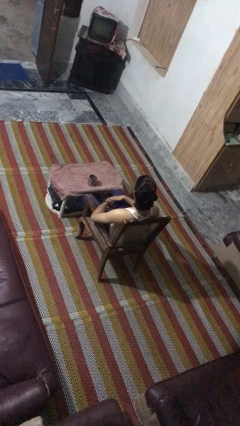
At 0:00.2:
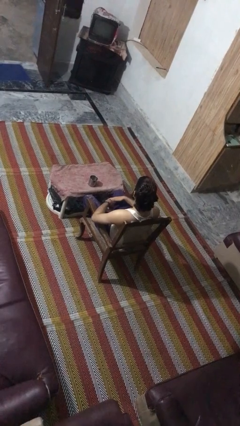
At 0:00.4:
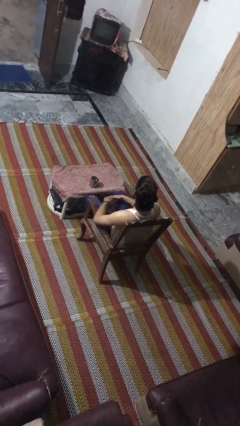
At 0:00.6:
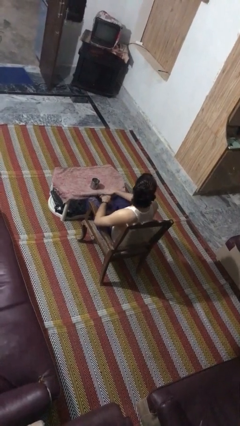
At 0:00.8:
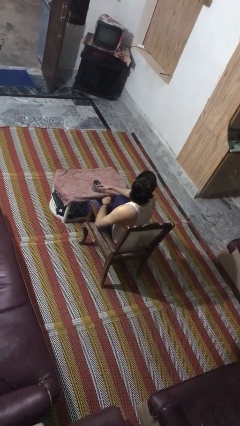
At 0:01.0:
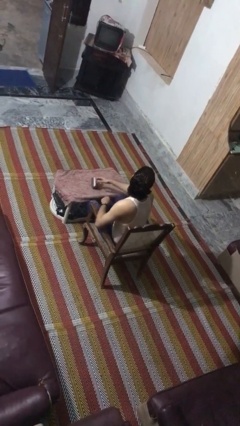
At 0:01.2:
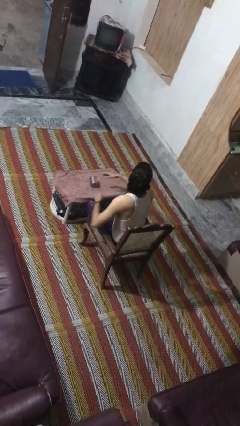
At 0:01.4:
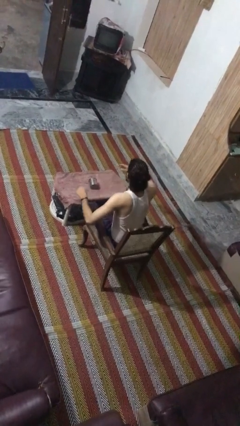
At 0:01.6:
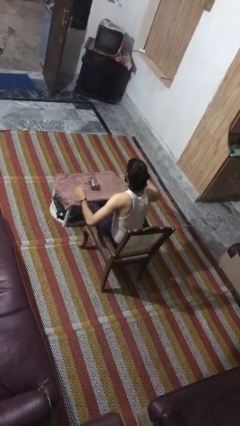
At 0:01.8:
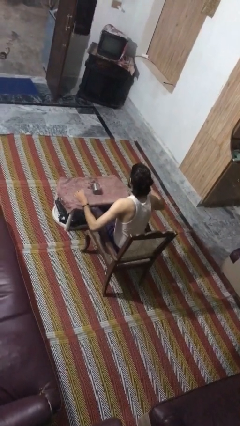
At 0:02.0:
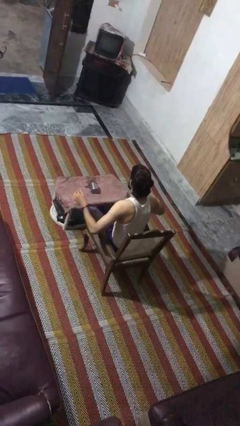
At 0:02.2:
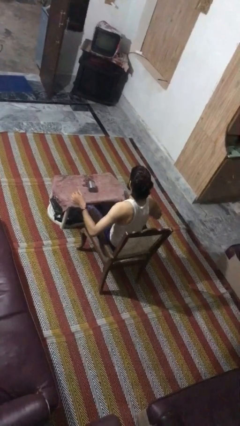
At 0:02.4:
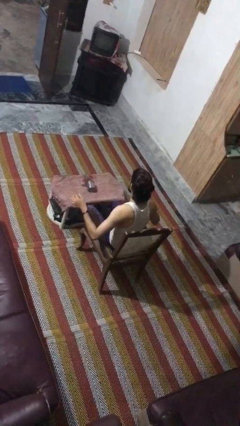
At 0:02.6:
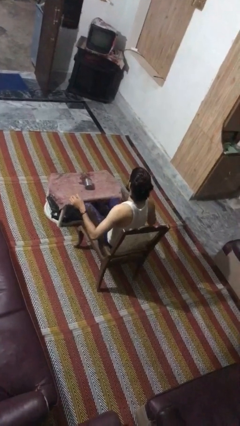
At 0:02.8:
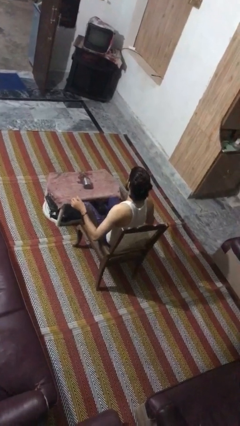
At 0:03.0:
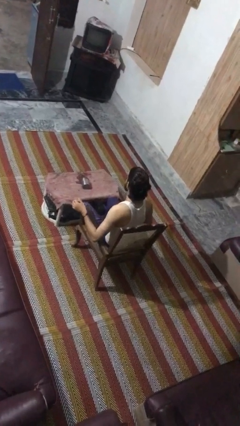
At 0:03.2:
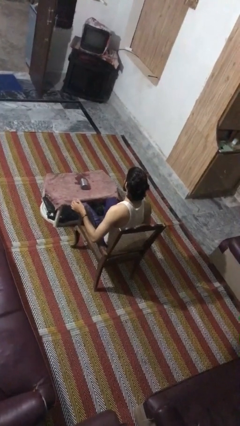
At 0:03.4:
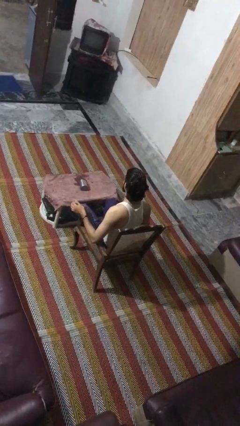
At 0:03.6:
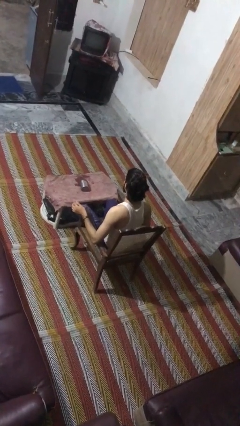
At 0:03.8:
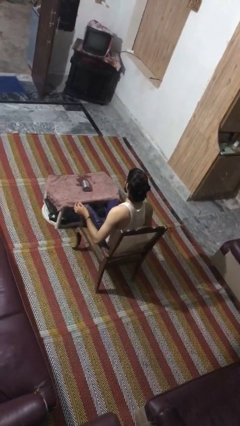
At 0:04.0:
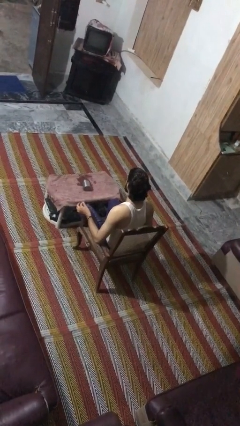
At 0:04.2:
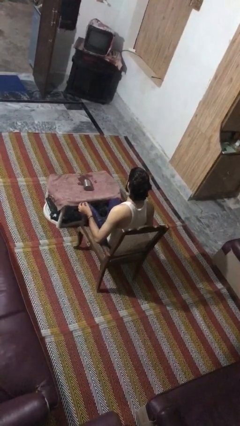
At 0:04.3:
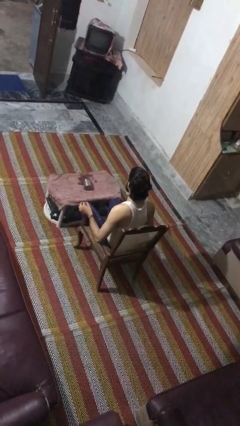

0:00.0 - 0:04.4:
person spills on table

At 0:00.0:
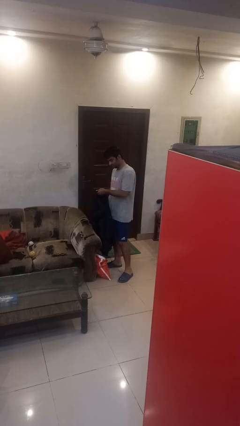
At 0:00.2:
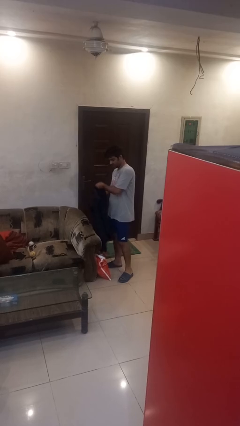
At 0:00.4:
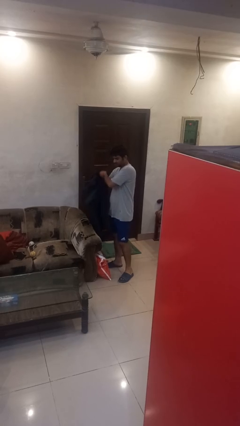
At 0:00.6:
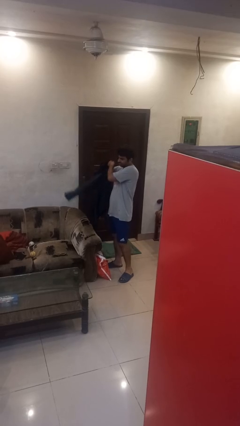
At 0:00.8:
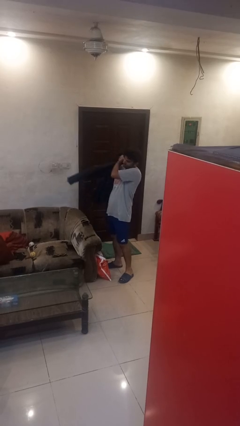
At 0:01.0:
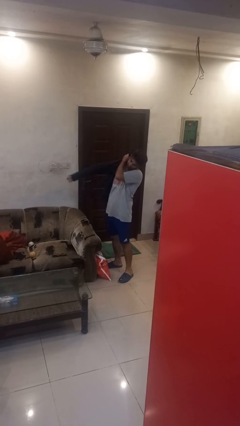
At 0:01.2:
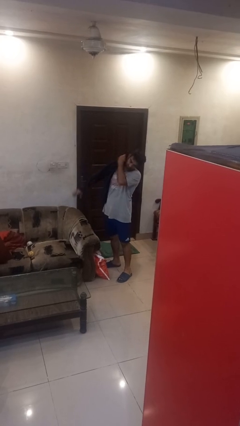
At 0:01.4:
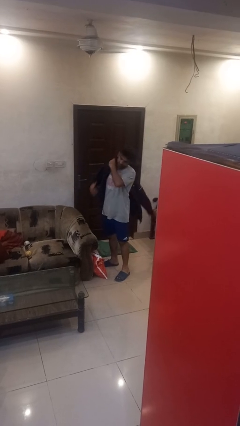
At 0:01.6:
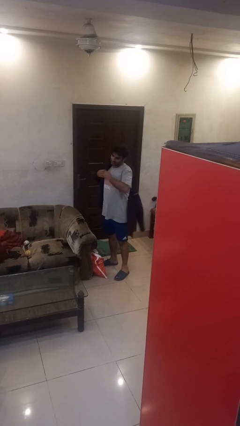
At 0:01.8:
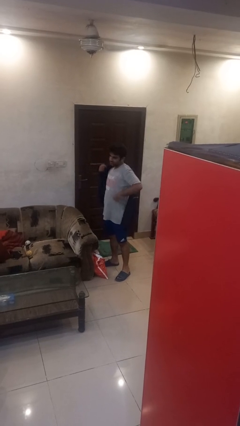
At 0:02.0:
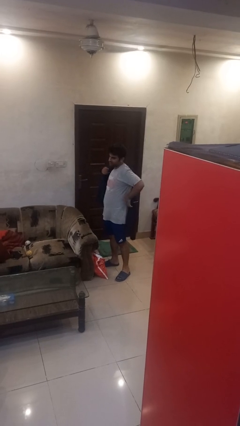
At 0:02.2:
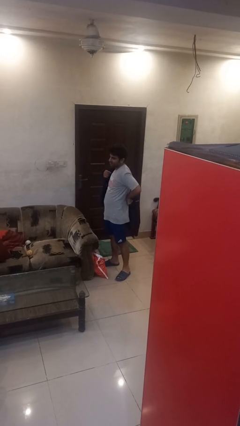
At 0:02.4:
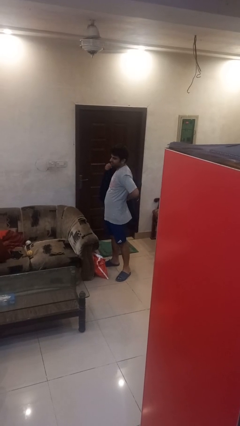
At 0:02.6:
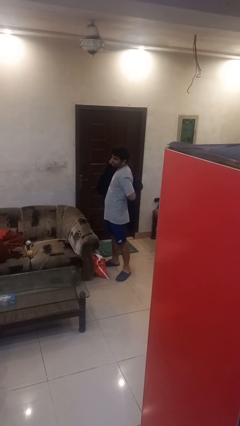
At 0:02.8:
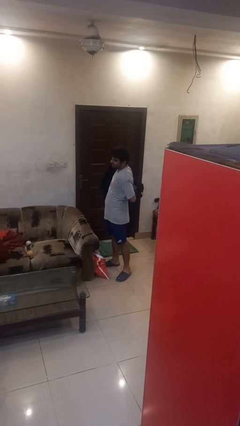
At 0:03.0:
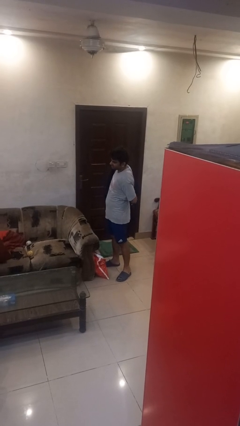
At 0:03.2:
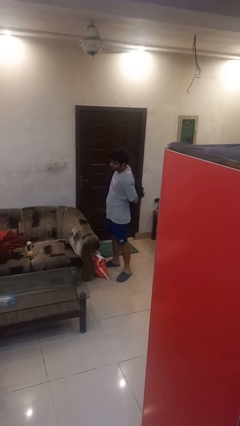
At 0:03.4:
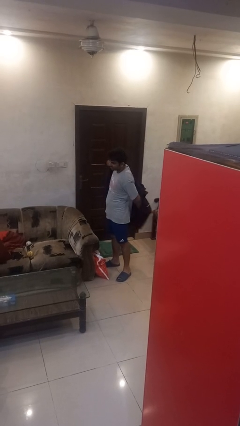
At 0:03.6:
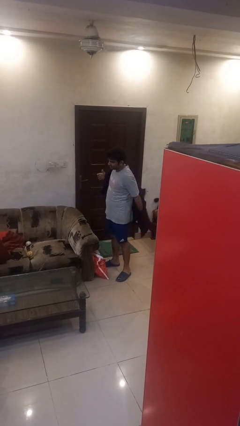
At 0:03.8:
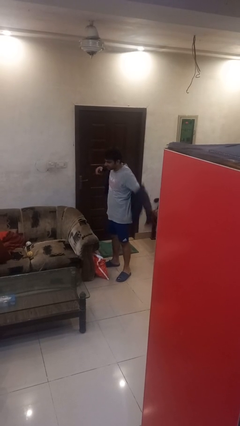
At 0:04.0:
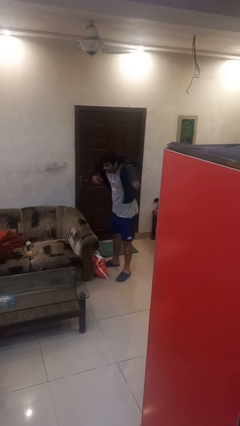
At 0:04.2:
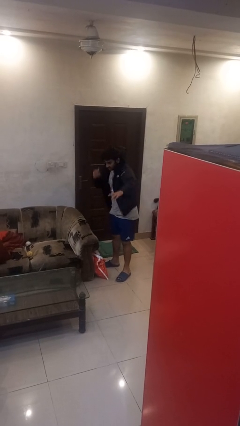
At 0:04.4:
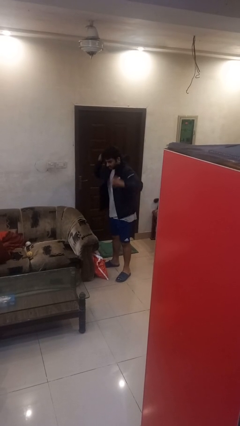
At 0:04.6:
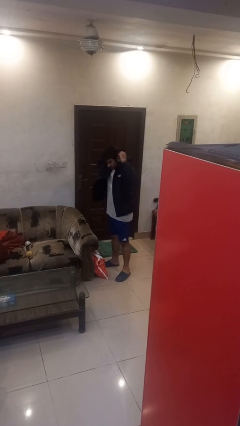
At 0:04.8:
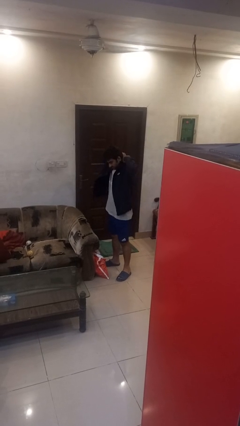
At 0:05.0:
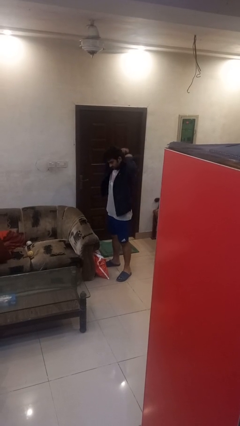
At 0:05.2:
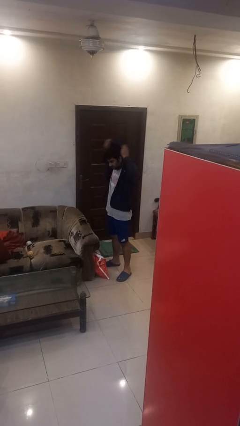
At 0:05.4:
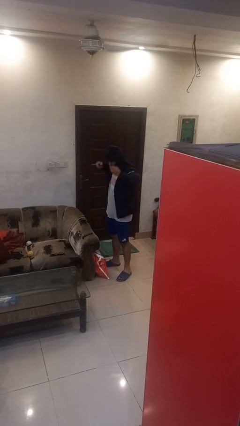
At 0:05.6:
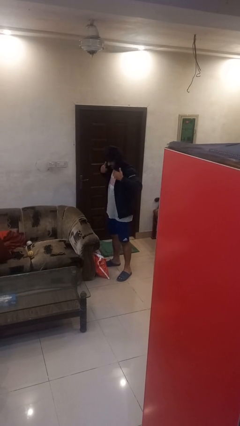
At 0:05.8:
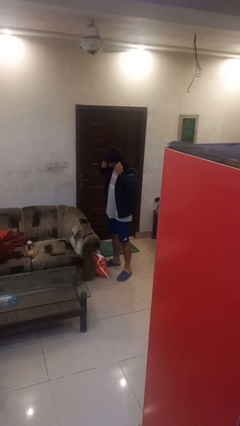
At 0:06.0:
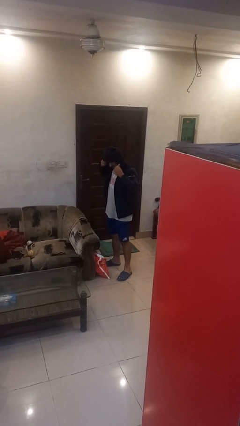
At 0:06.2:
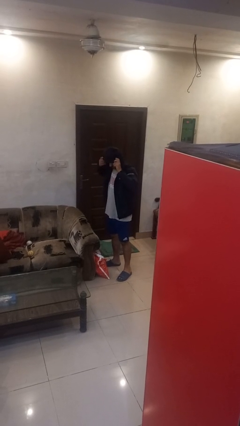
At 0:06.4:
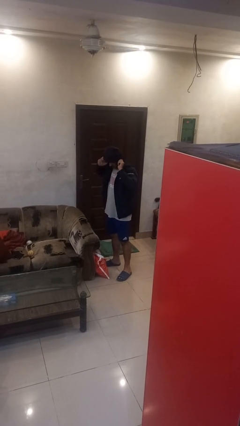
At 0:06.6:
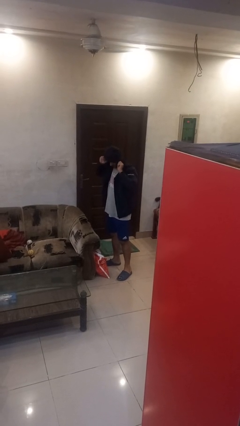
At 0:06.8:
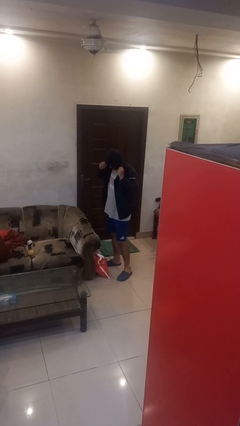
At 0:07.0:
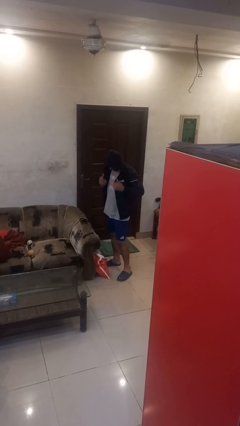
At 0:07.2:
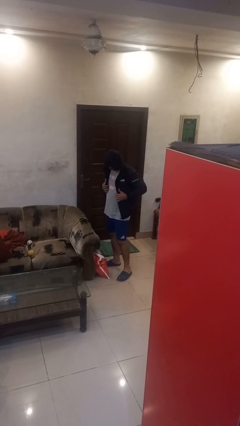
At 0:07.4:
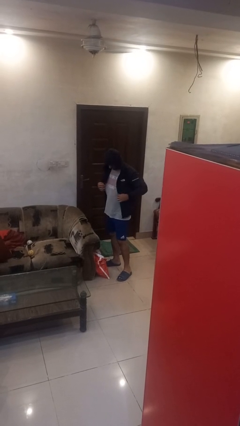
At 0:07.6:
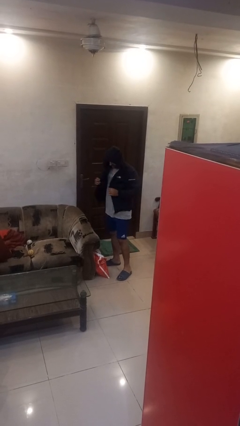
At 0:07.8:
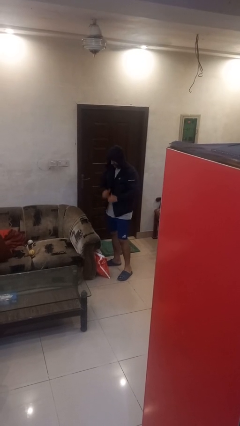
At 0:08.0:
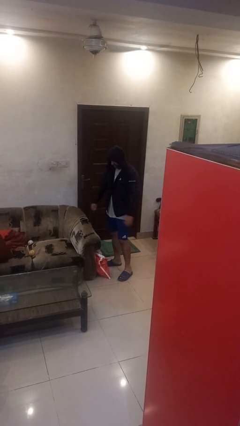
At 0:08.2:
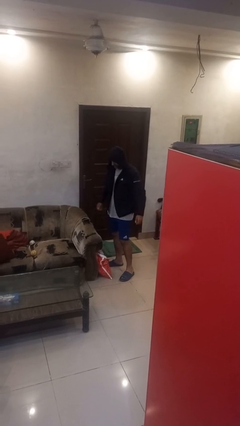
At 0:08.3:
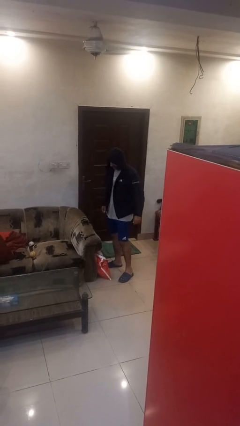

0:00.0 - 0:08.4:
person puts on hoodie

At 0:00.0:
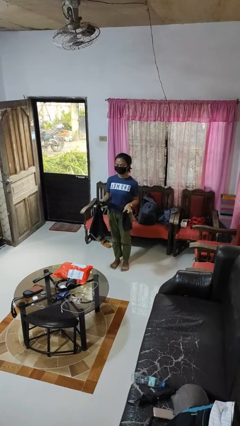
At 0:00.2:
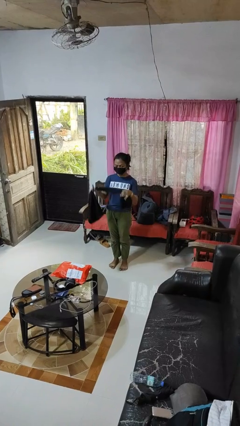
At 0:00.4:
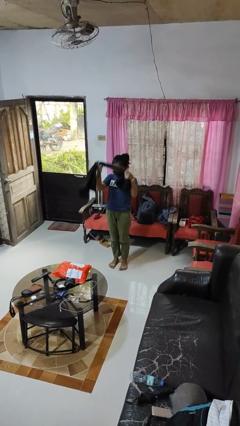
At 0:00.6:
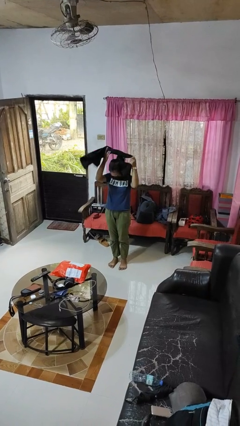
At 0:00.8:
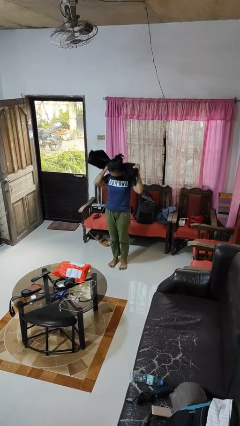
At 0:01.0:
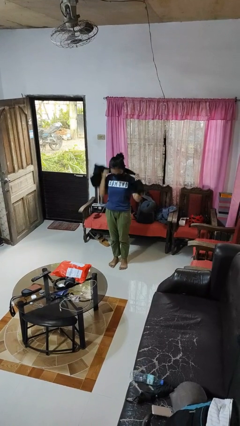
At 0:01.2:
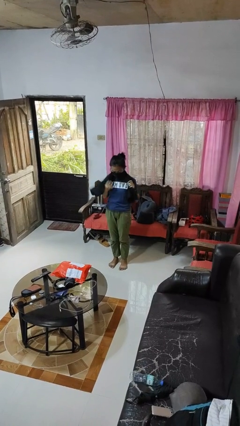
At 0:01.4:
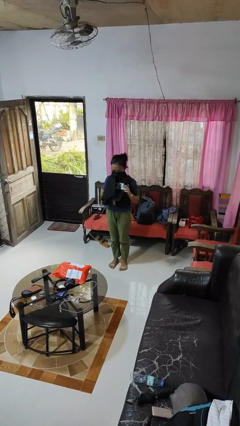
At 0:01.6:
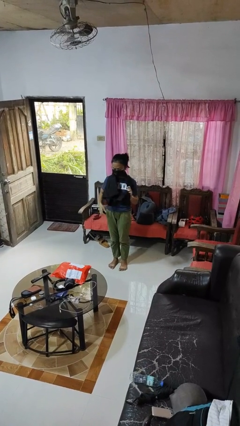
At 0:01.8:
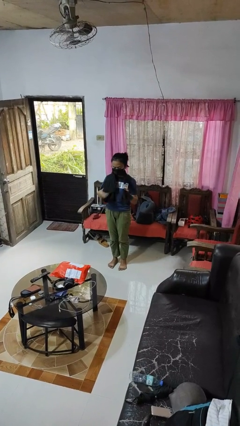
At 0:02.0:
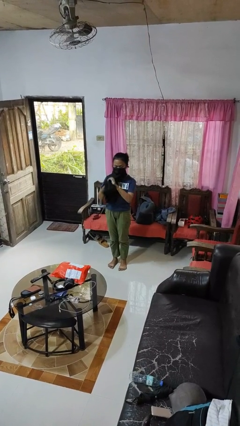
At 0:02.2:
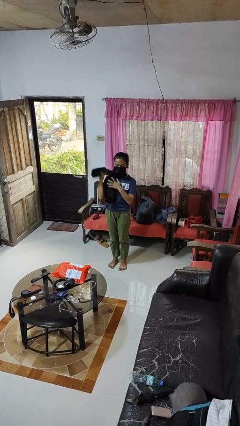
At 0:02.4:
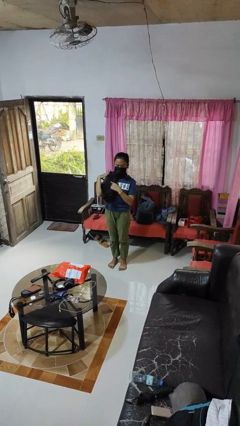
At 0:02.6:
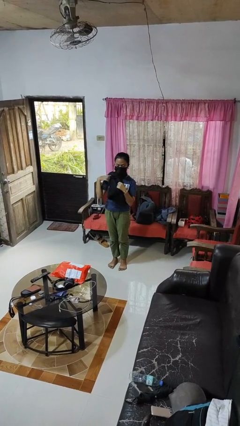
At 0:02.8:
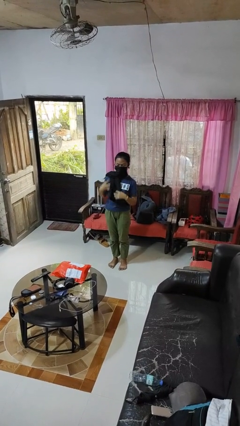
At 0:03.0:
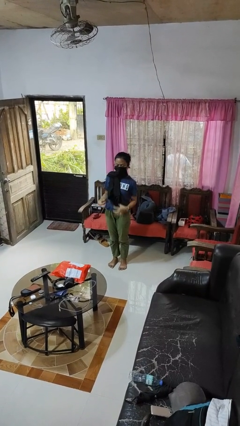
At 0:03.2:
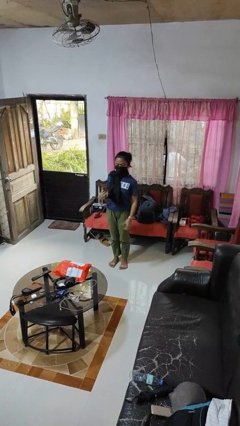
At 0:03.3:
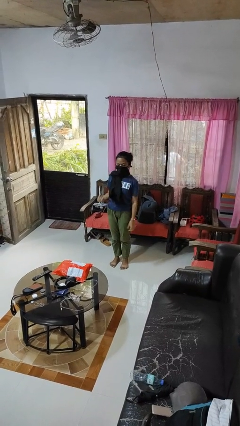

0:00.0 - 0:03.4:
person puts on scarf

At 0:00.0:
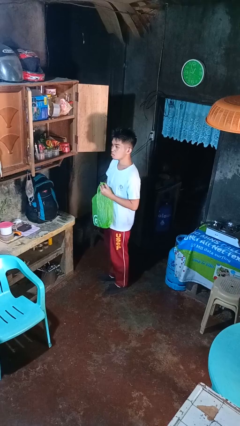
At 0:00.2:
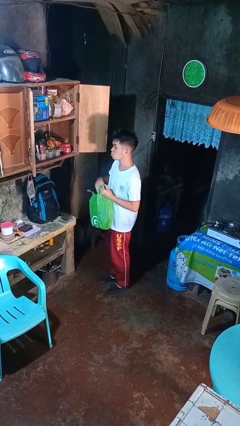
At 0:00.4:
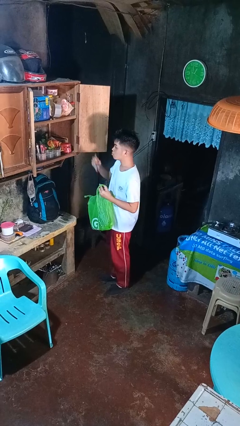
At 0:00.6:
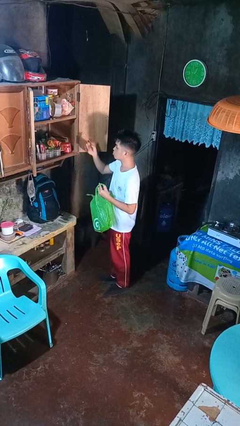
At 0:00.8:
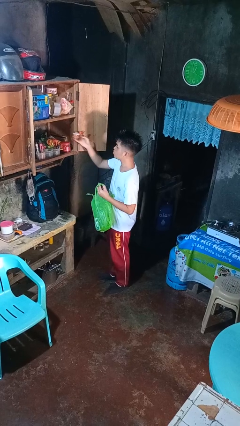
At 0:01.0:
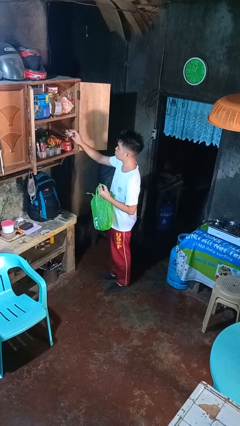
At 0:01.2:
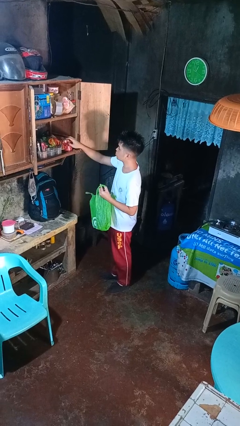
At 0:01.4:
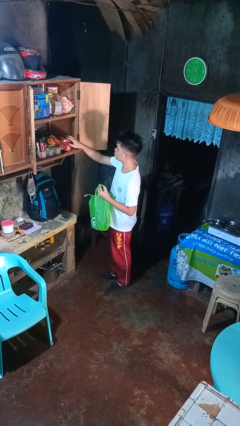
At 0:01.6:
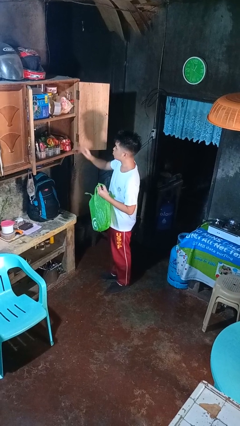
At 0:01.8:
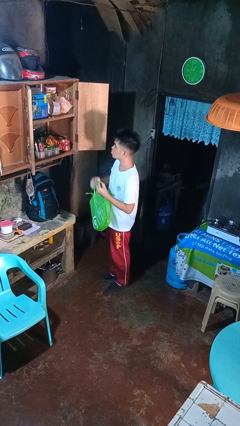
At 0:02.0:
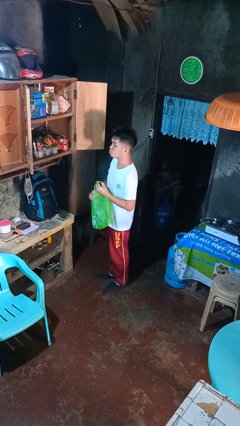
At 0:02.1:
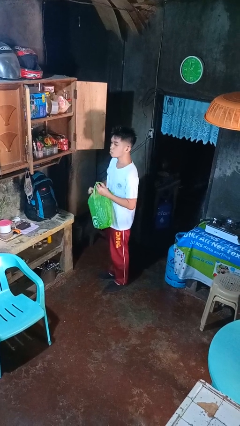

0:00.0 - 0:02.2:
person loads groceries into cabinet
